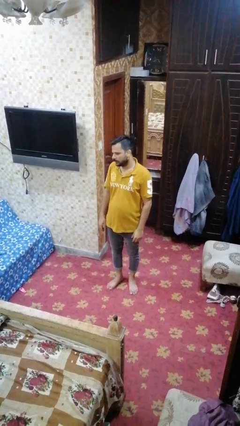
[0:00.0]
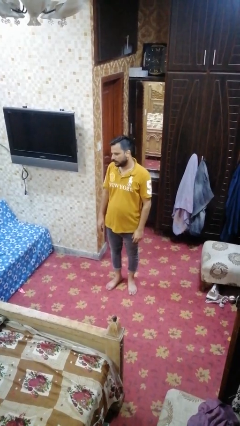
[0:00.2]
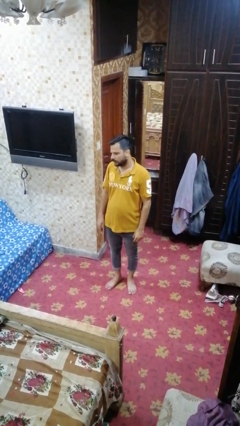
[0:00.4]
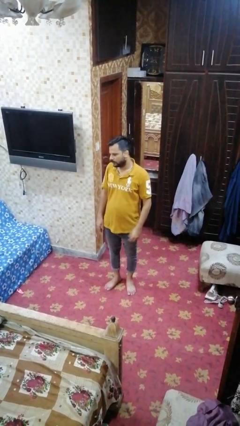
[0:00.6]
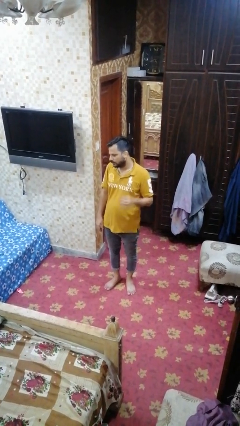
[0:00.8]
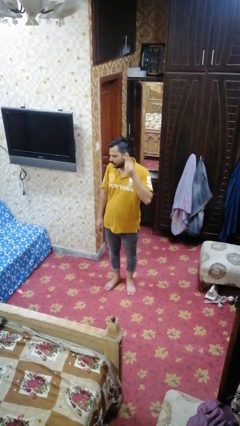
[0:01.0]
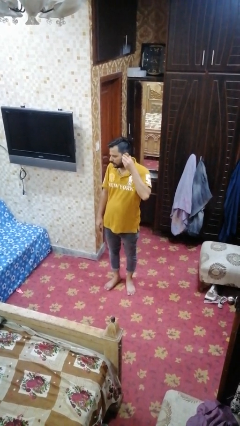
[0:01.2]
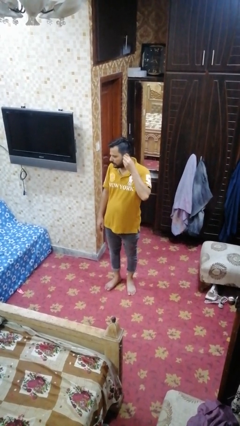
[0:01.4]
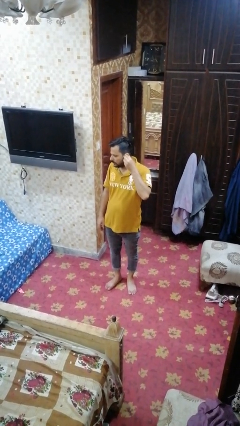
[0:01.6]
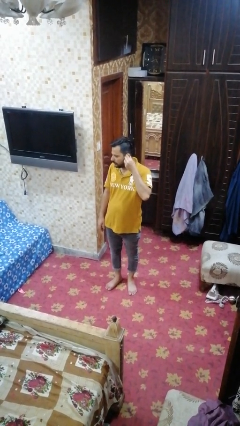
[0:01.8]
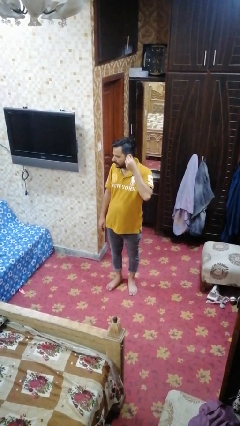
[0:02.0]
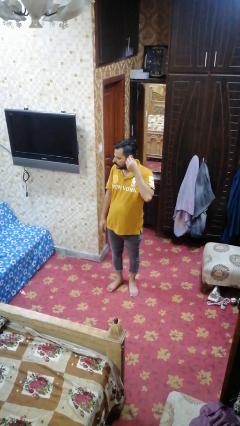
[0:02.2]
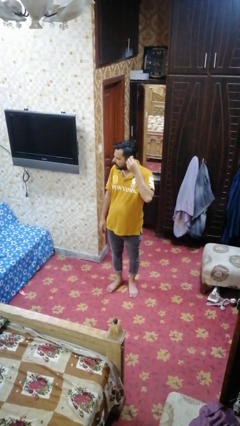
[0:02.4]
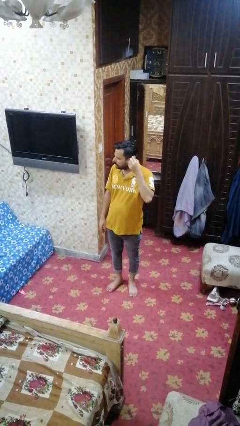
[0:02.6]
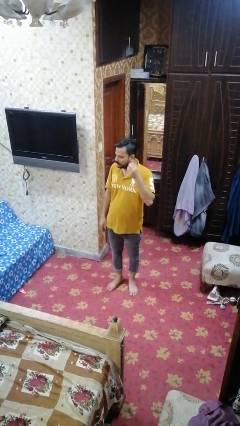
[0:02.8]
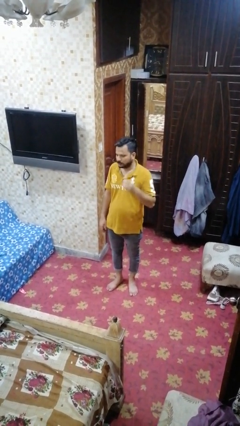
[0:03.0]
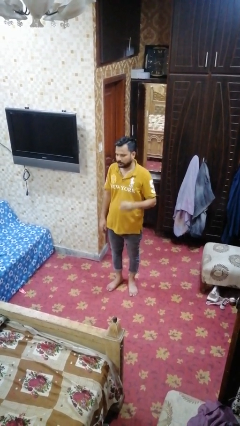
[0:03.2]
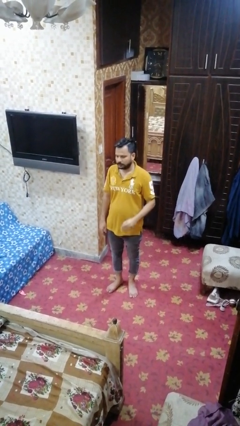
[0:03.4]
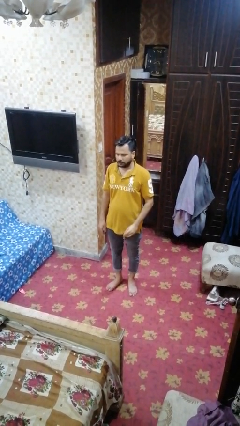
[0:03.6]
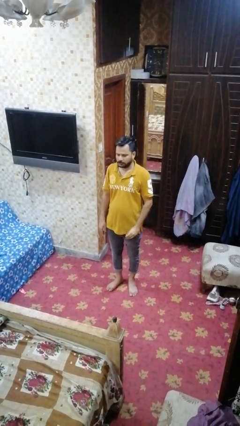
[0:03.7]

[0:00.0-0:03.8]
person takes off earrings

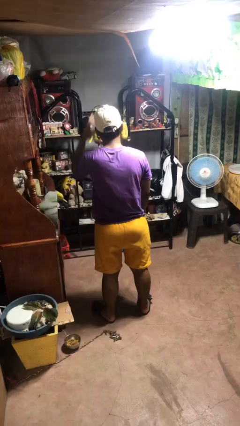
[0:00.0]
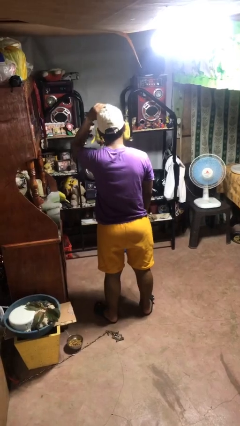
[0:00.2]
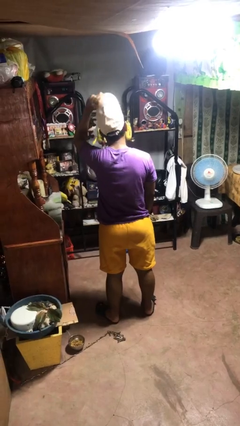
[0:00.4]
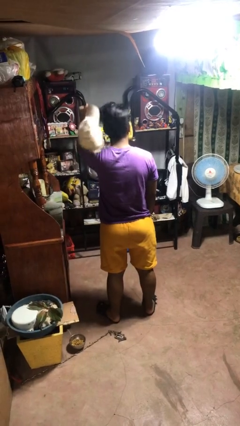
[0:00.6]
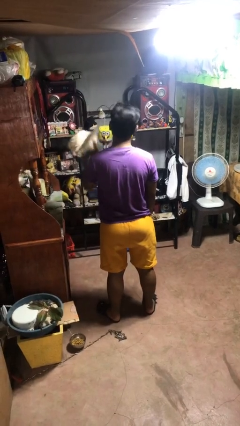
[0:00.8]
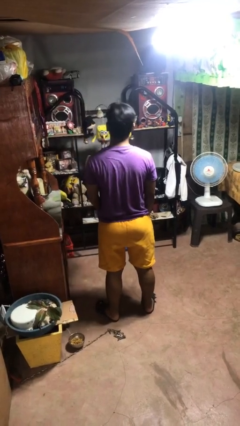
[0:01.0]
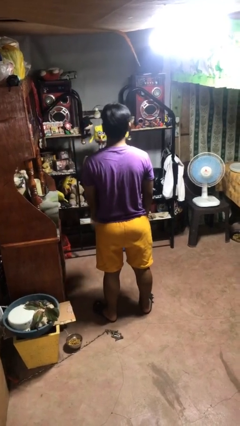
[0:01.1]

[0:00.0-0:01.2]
person takes off hat

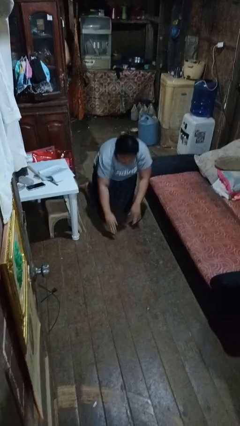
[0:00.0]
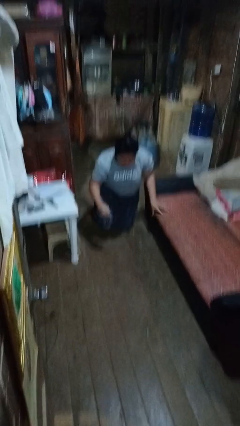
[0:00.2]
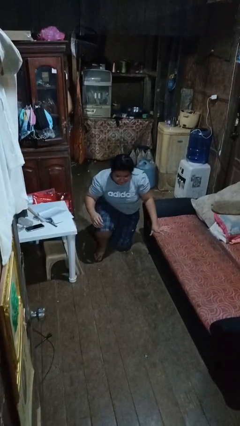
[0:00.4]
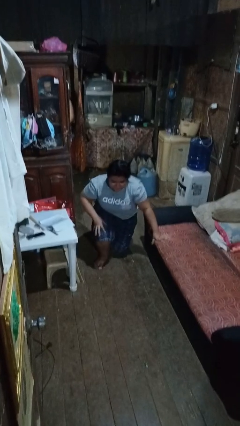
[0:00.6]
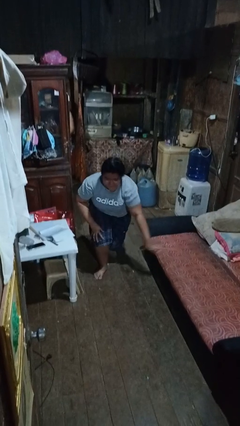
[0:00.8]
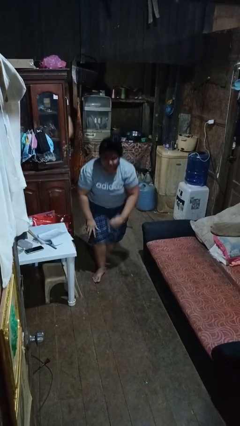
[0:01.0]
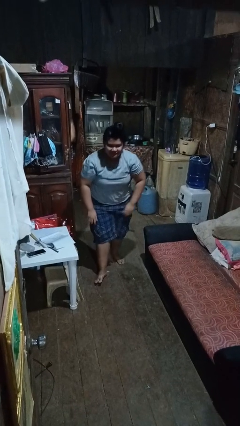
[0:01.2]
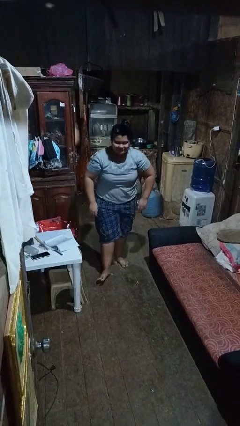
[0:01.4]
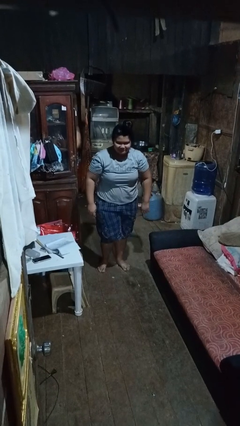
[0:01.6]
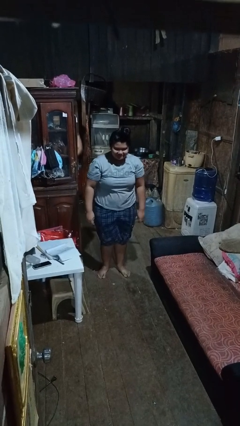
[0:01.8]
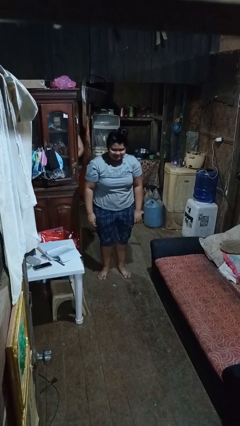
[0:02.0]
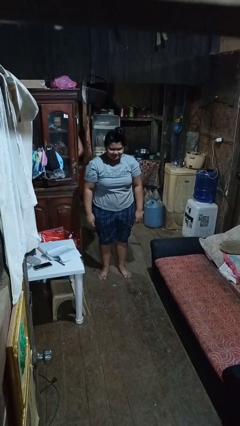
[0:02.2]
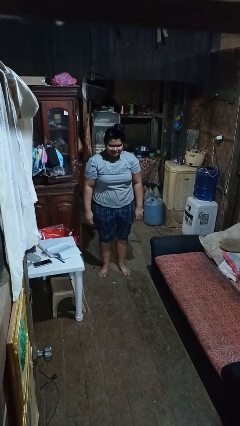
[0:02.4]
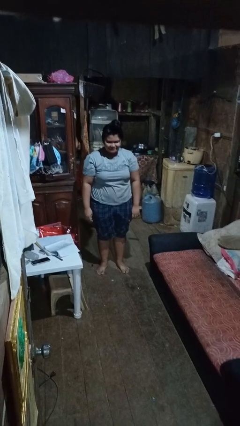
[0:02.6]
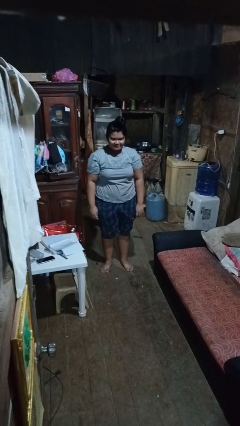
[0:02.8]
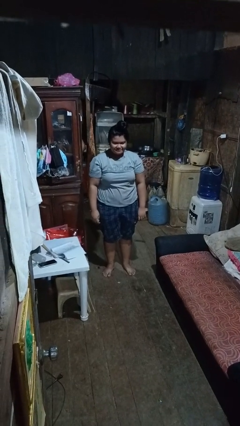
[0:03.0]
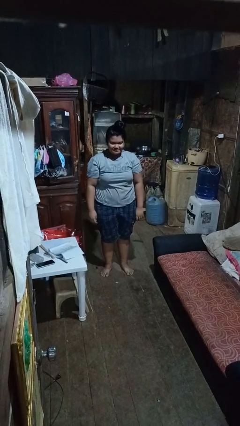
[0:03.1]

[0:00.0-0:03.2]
person stands up from floor

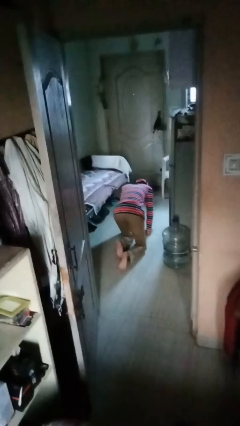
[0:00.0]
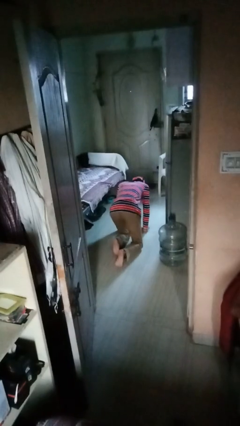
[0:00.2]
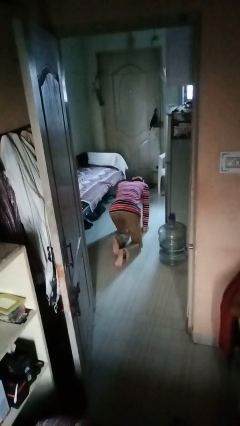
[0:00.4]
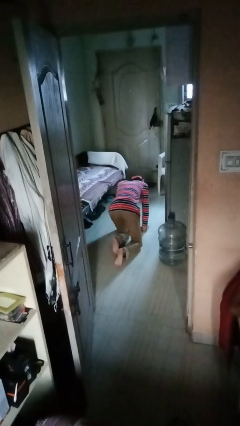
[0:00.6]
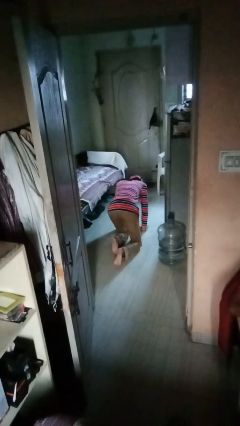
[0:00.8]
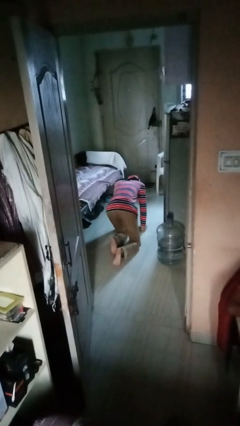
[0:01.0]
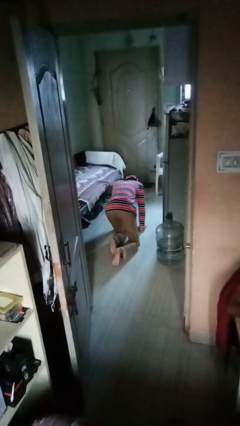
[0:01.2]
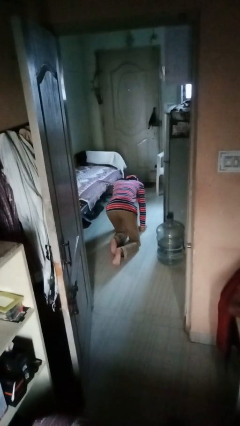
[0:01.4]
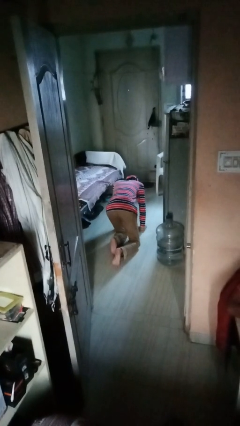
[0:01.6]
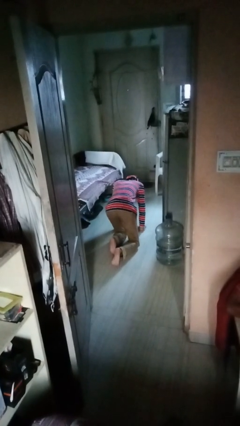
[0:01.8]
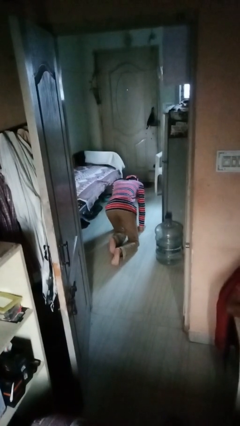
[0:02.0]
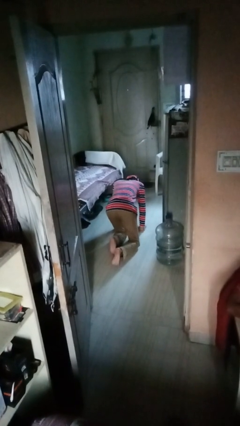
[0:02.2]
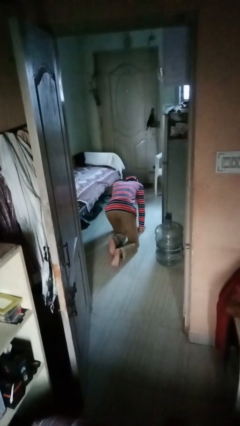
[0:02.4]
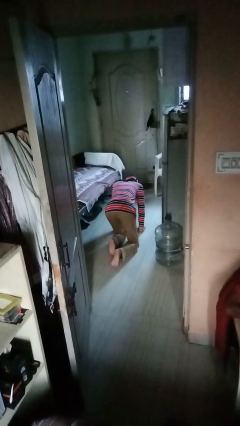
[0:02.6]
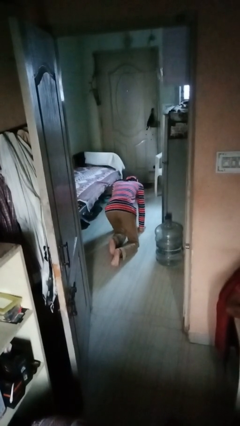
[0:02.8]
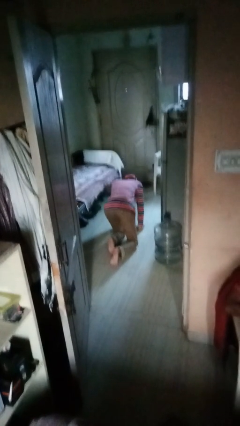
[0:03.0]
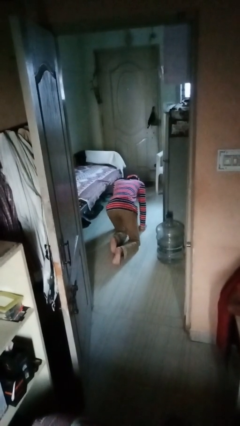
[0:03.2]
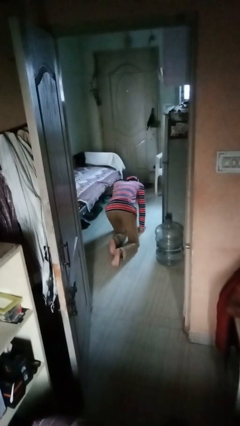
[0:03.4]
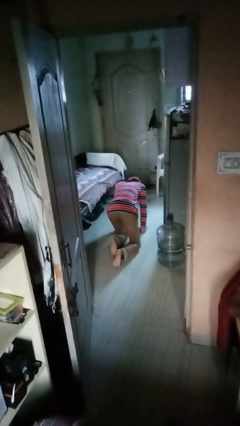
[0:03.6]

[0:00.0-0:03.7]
person crawls

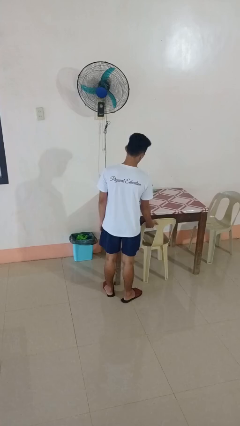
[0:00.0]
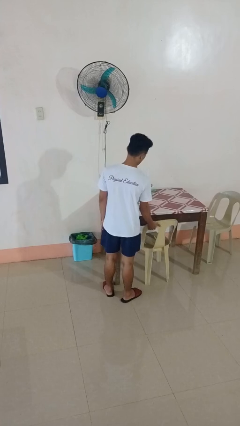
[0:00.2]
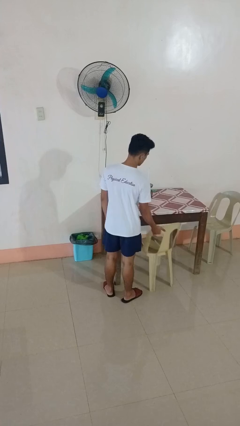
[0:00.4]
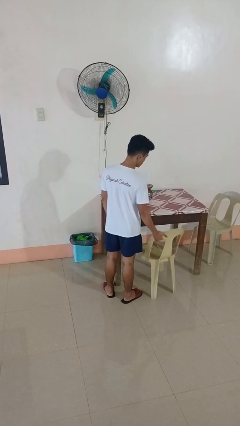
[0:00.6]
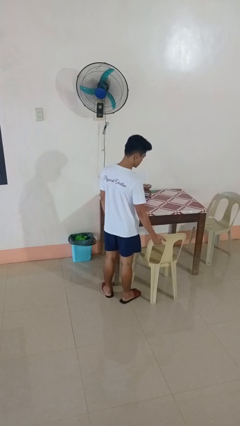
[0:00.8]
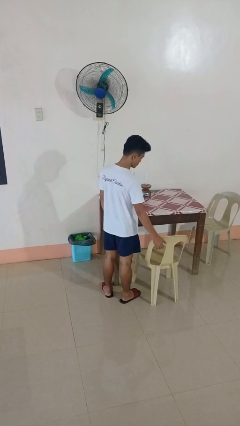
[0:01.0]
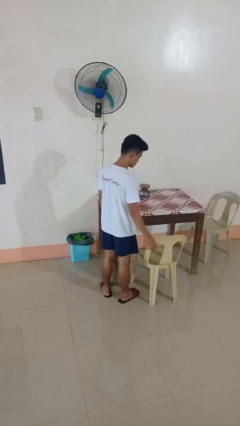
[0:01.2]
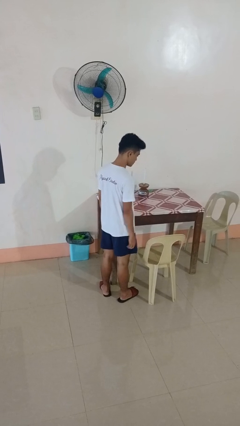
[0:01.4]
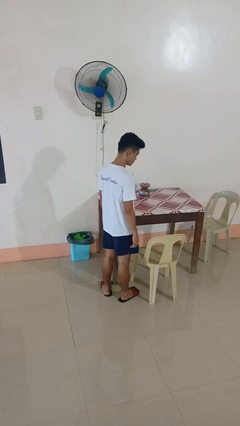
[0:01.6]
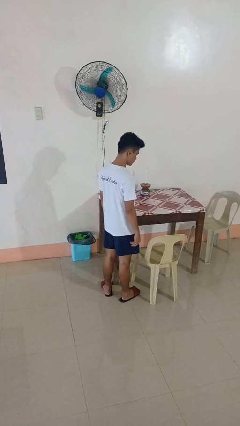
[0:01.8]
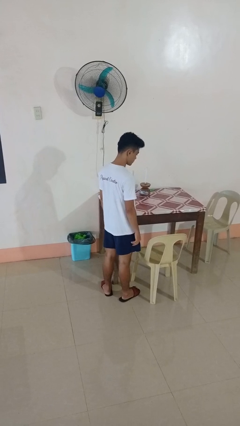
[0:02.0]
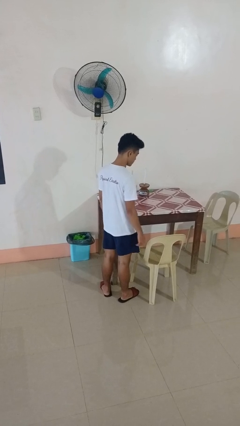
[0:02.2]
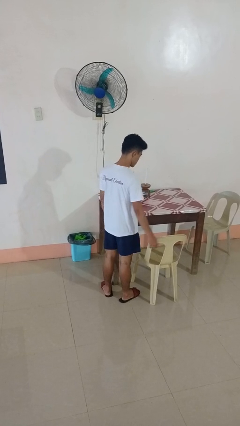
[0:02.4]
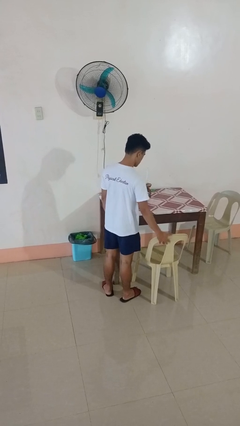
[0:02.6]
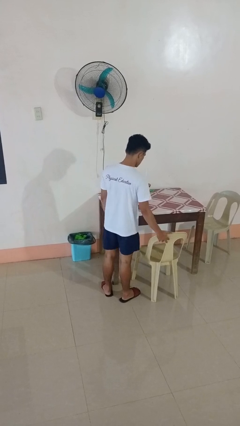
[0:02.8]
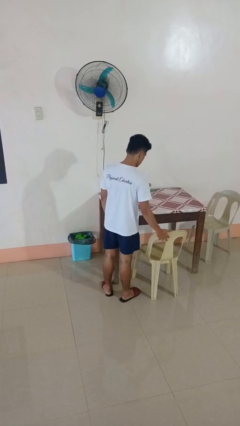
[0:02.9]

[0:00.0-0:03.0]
person pulls out chair

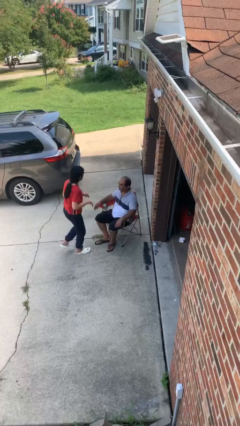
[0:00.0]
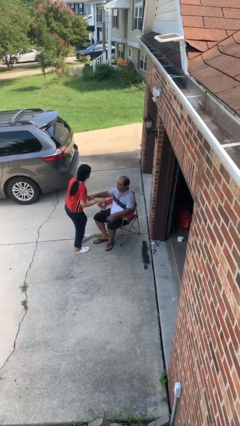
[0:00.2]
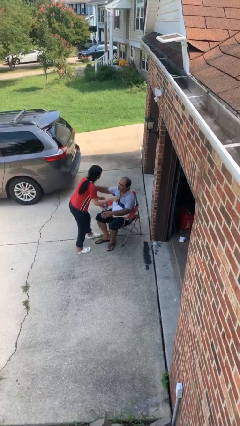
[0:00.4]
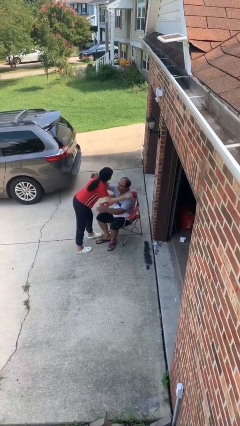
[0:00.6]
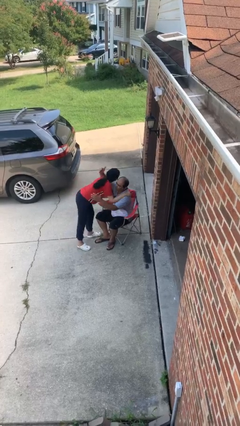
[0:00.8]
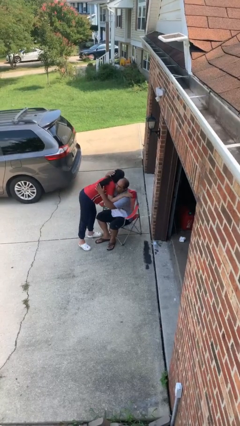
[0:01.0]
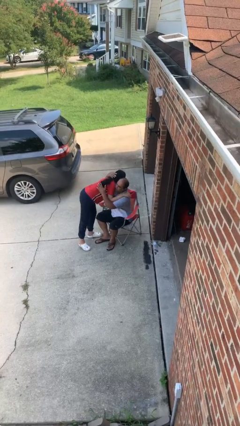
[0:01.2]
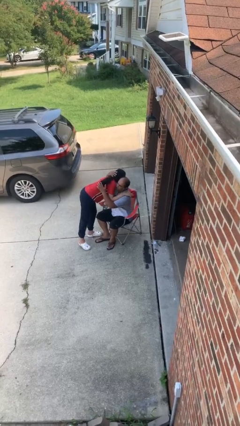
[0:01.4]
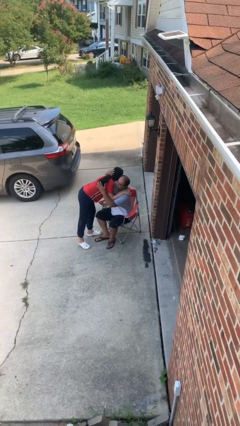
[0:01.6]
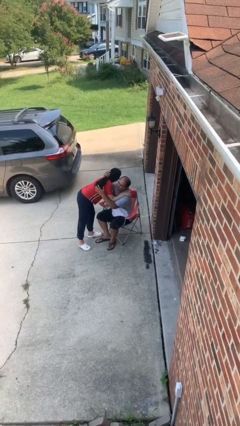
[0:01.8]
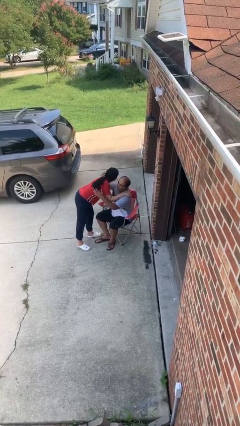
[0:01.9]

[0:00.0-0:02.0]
person embraces person

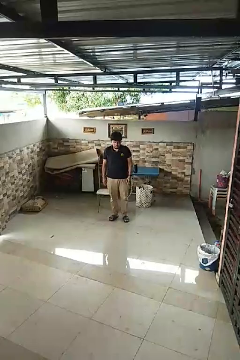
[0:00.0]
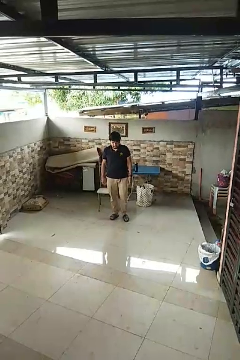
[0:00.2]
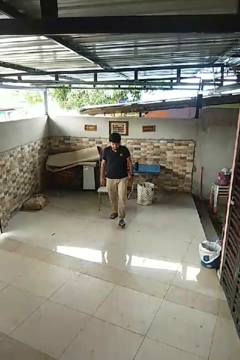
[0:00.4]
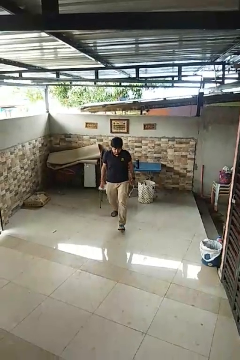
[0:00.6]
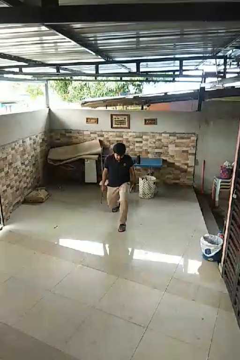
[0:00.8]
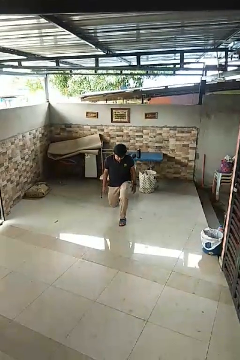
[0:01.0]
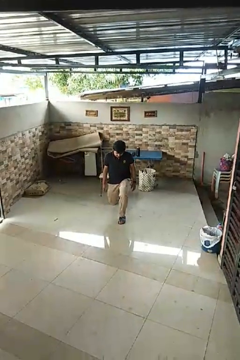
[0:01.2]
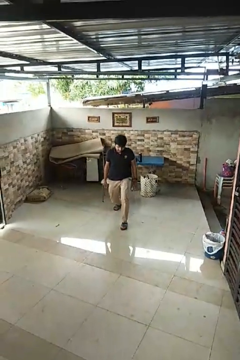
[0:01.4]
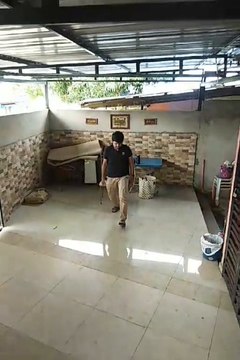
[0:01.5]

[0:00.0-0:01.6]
person exercises with lunges
